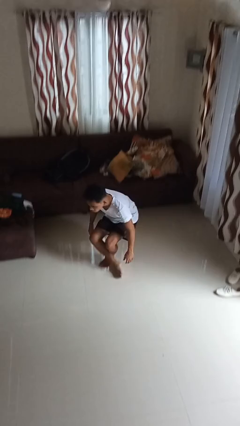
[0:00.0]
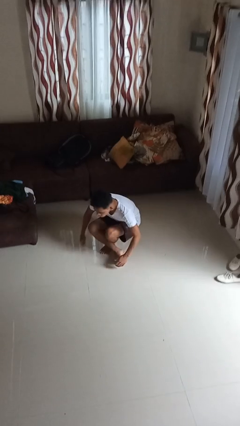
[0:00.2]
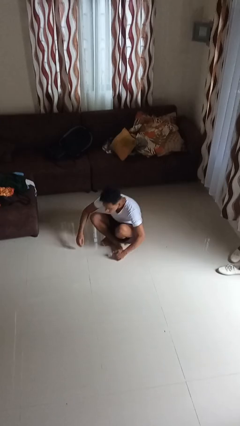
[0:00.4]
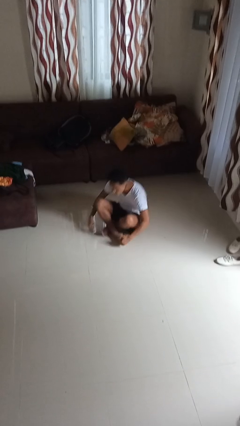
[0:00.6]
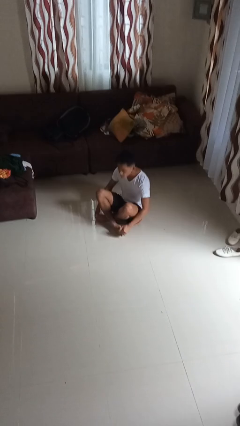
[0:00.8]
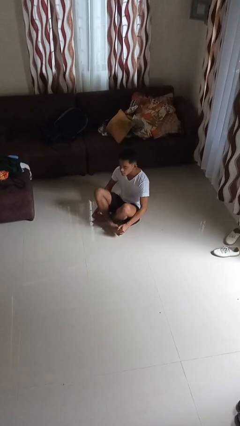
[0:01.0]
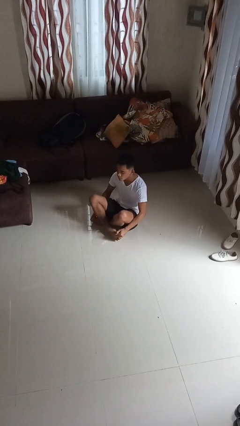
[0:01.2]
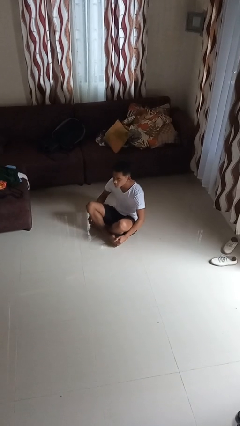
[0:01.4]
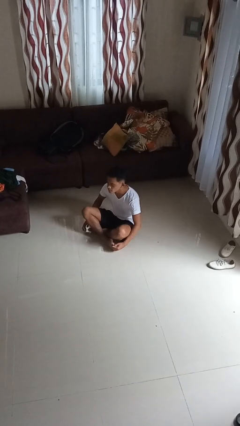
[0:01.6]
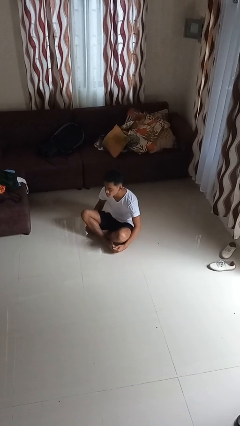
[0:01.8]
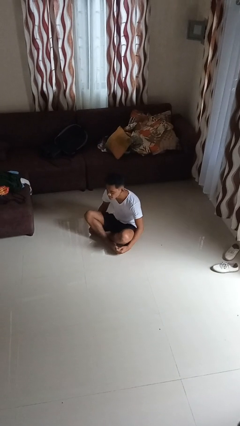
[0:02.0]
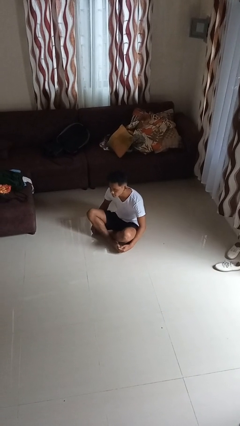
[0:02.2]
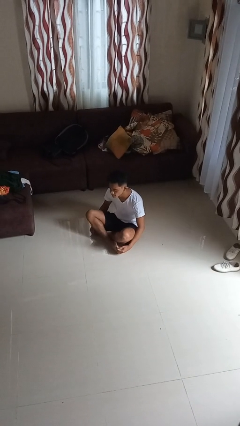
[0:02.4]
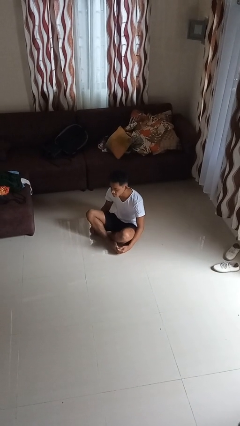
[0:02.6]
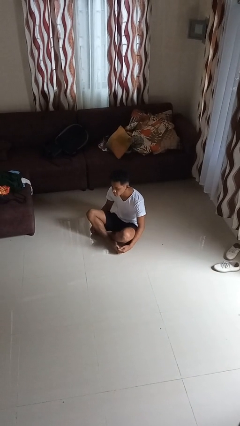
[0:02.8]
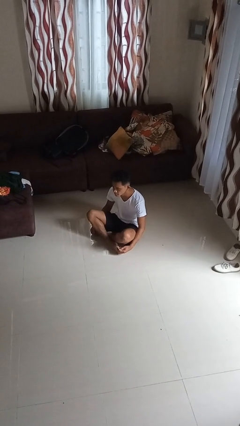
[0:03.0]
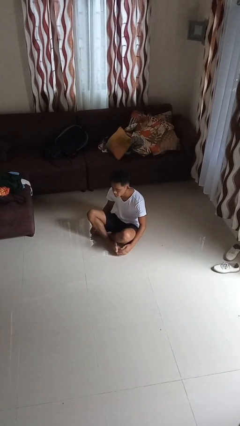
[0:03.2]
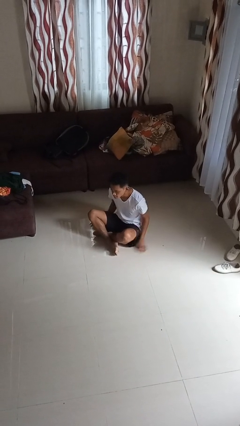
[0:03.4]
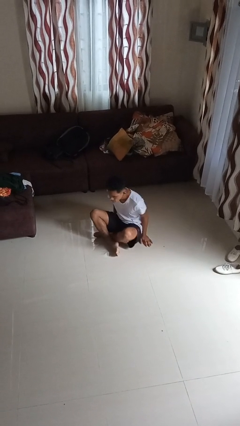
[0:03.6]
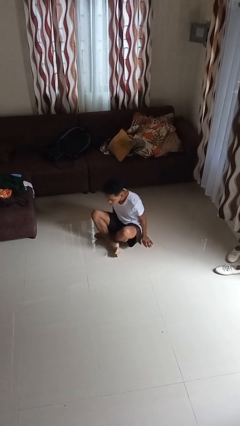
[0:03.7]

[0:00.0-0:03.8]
person sits crisscross

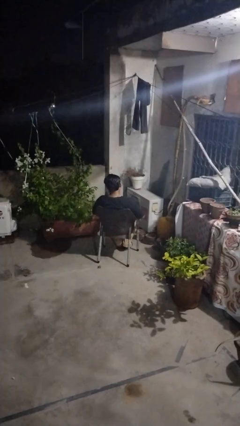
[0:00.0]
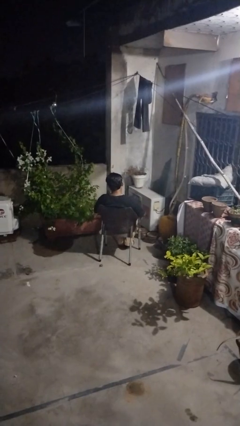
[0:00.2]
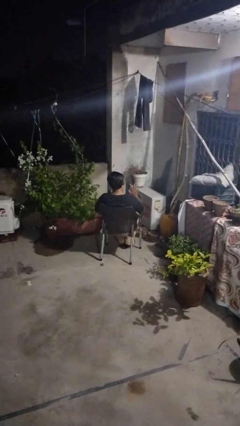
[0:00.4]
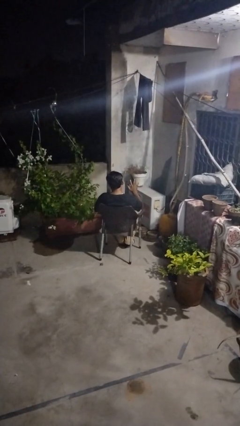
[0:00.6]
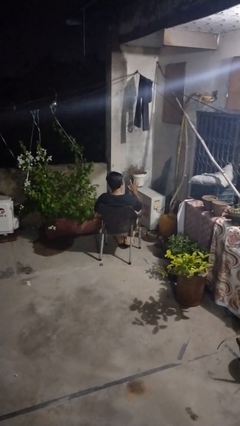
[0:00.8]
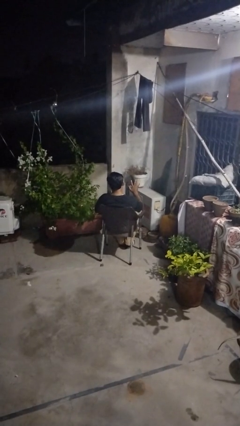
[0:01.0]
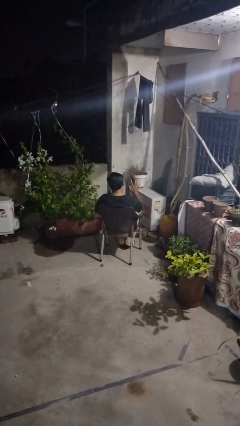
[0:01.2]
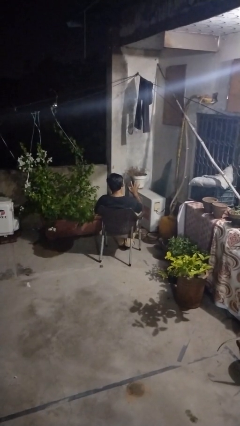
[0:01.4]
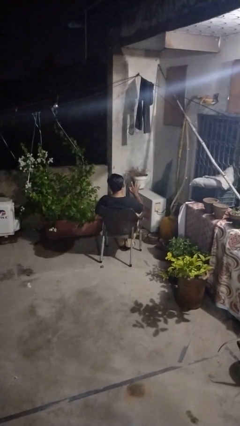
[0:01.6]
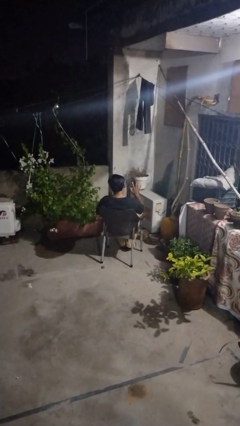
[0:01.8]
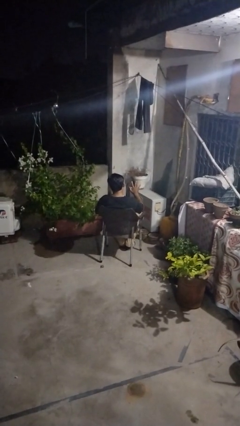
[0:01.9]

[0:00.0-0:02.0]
person gestures number five

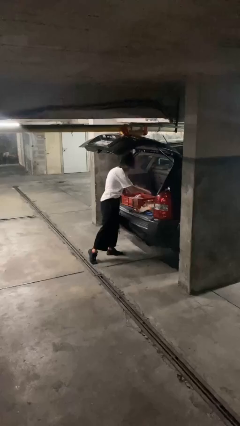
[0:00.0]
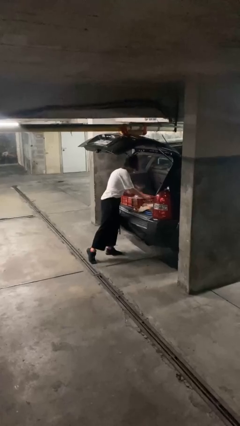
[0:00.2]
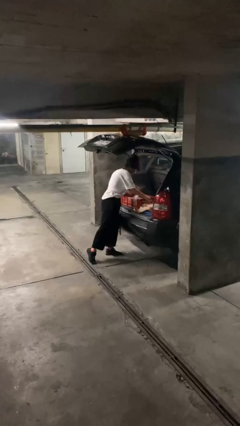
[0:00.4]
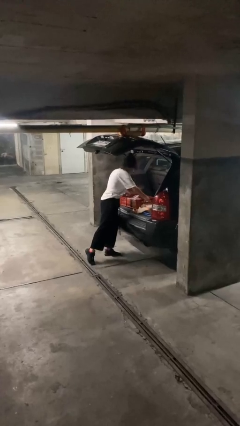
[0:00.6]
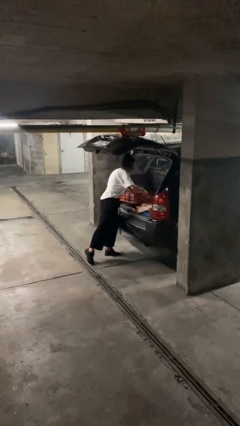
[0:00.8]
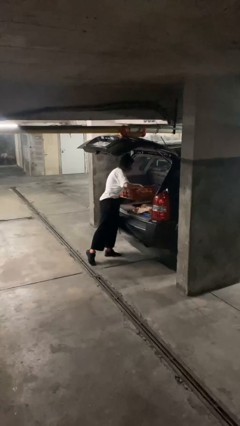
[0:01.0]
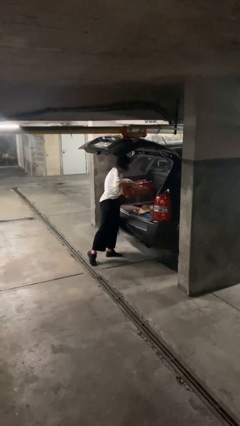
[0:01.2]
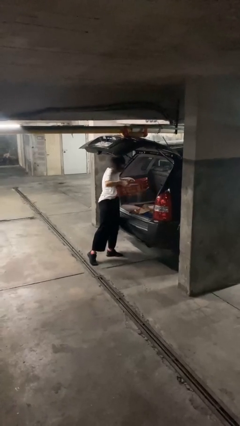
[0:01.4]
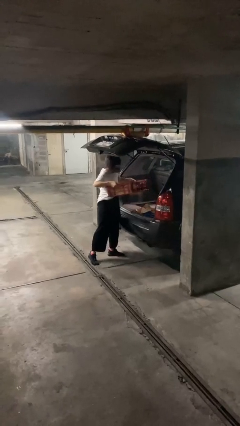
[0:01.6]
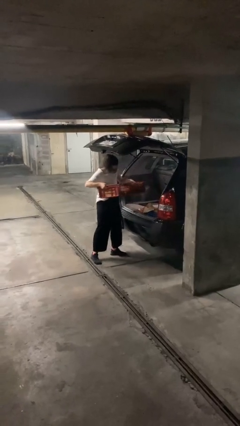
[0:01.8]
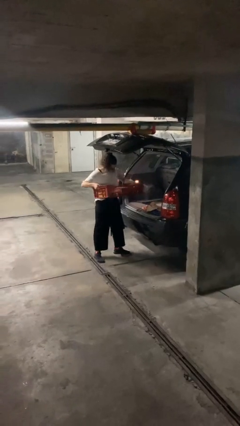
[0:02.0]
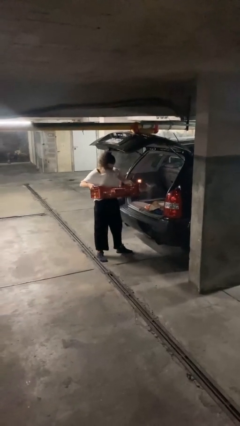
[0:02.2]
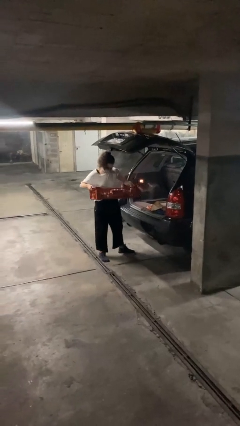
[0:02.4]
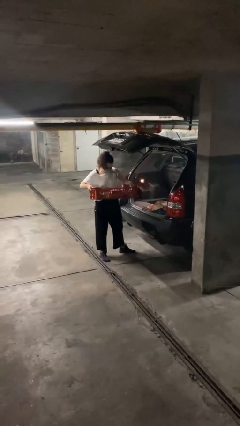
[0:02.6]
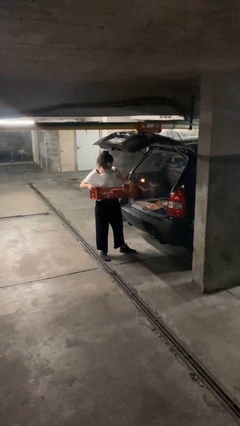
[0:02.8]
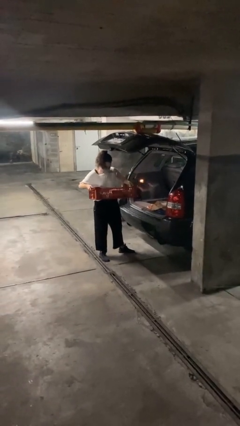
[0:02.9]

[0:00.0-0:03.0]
person unloads car

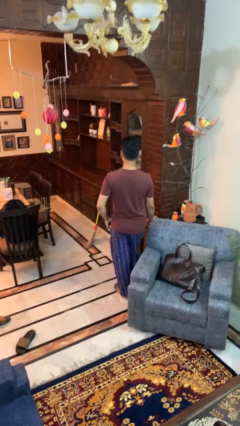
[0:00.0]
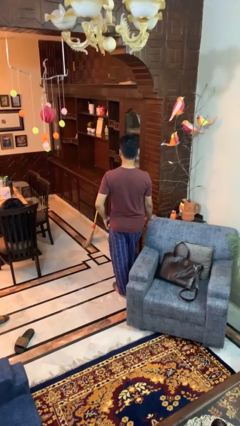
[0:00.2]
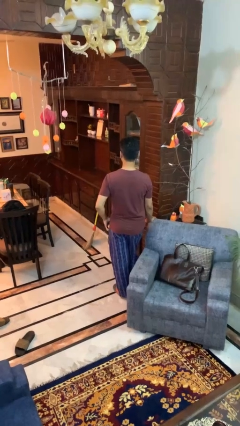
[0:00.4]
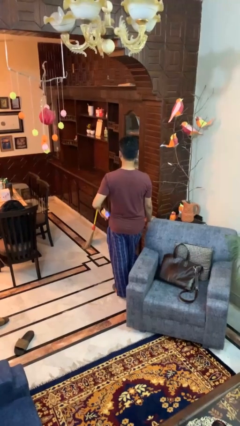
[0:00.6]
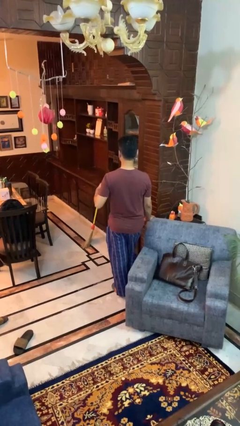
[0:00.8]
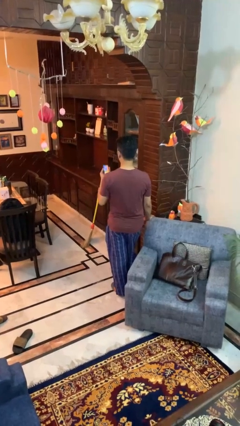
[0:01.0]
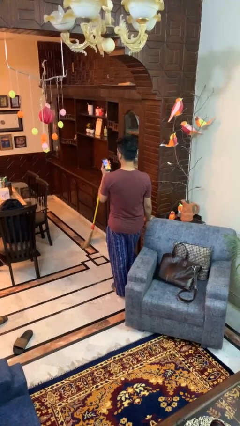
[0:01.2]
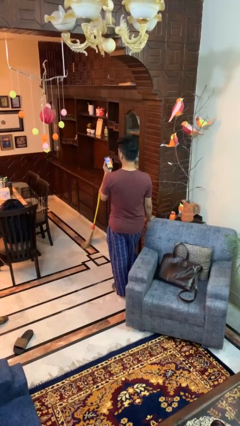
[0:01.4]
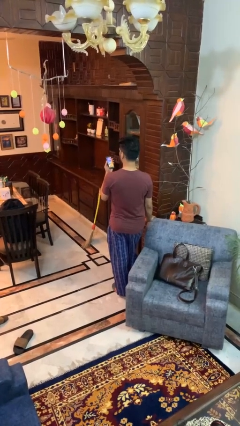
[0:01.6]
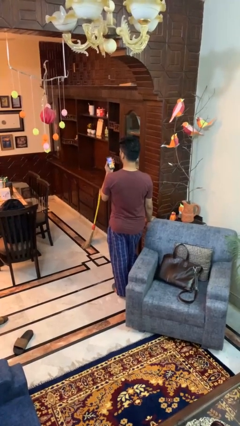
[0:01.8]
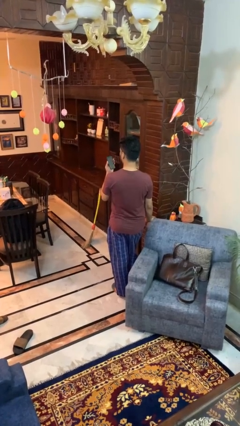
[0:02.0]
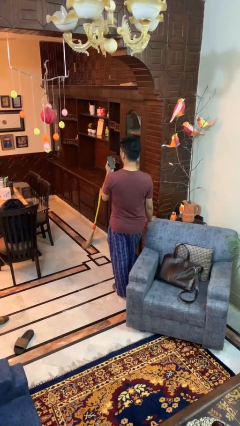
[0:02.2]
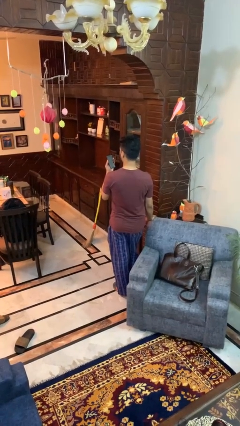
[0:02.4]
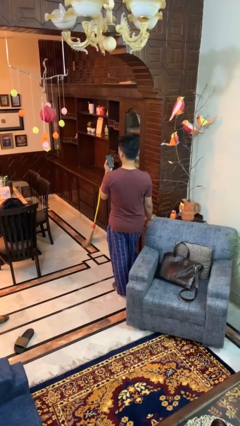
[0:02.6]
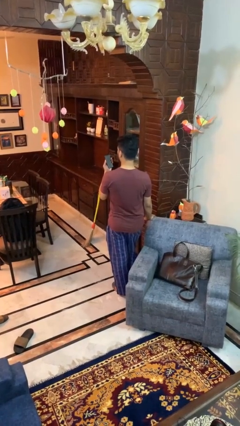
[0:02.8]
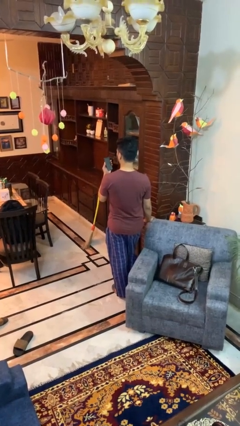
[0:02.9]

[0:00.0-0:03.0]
person takes phone from pocket

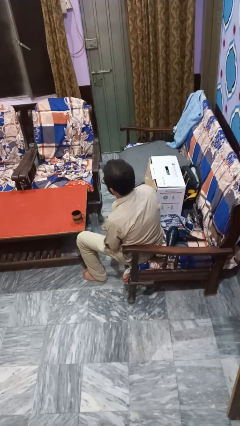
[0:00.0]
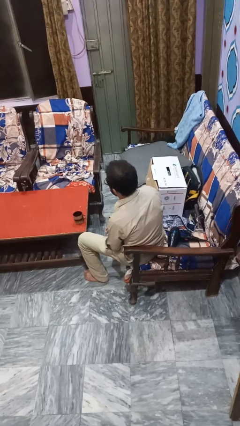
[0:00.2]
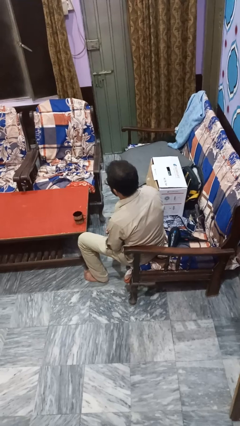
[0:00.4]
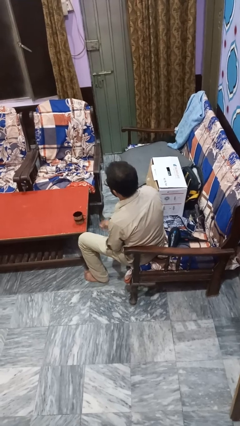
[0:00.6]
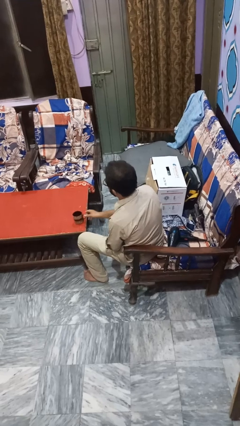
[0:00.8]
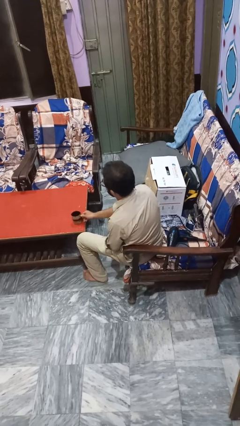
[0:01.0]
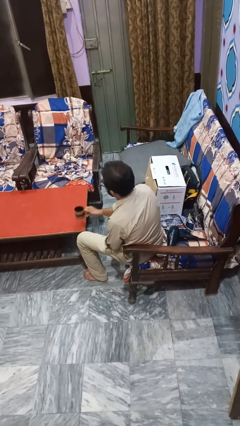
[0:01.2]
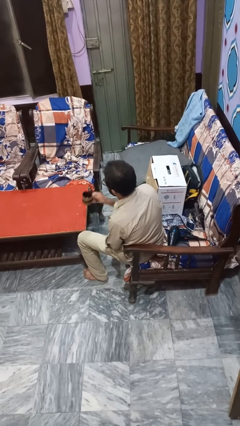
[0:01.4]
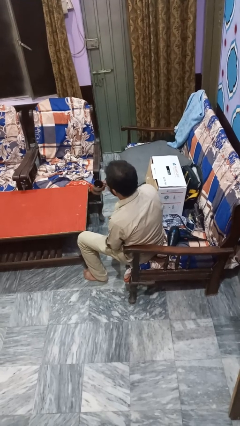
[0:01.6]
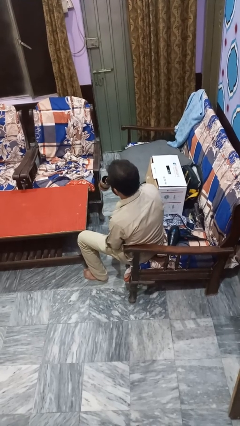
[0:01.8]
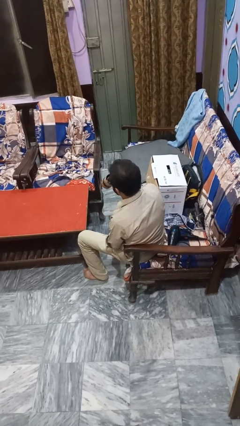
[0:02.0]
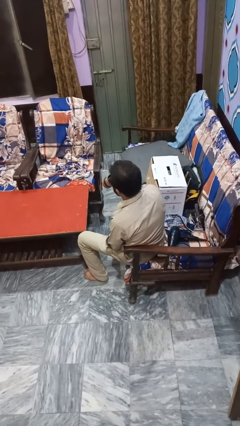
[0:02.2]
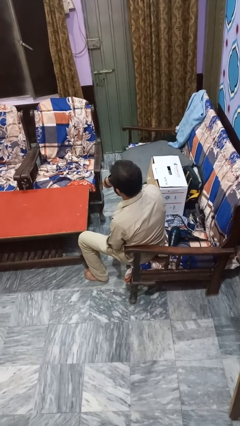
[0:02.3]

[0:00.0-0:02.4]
person pours coffee into mug

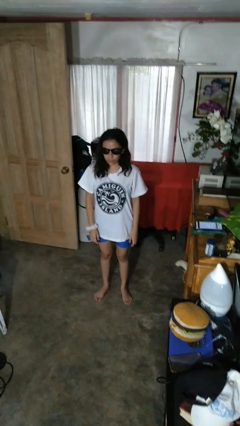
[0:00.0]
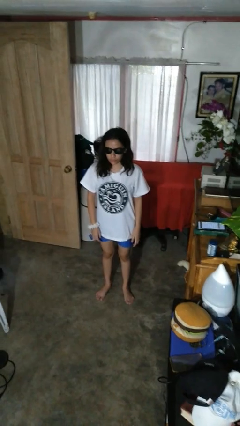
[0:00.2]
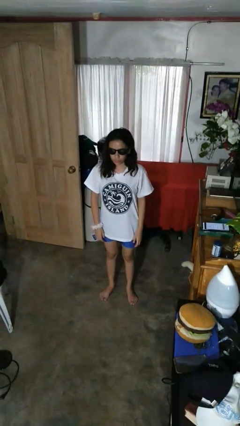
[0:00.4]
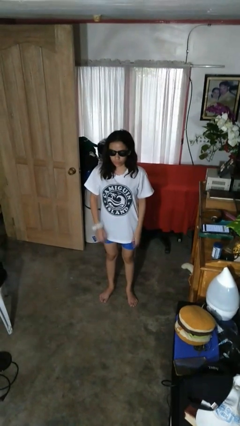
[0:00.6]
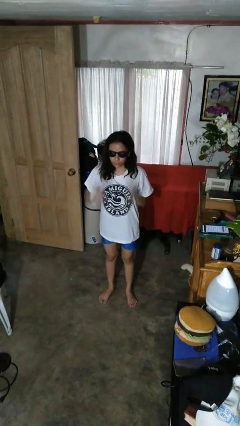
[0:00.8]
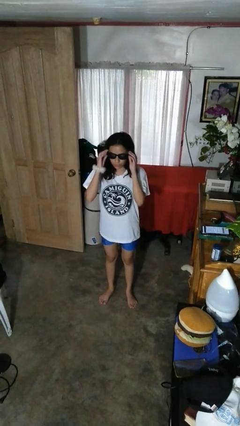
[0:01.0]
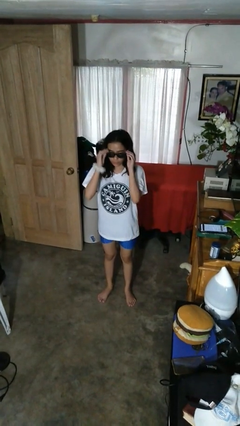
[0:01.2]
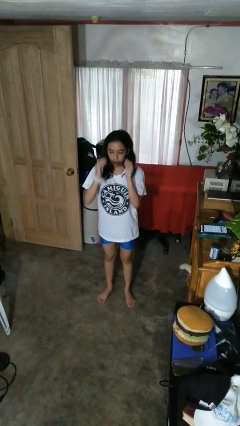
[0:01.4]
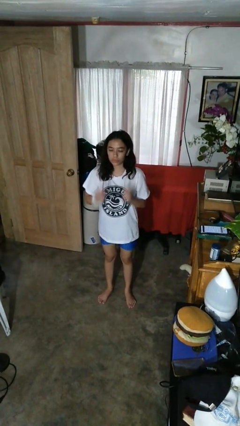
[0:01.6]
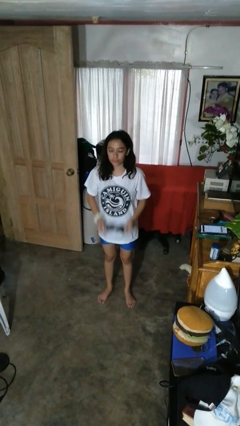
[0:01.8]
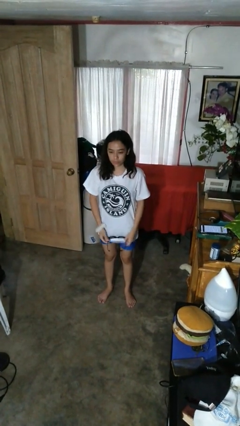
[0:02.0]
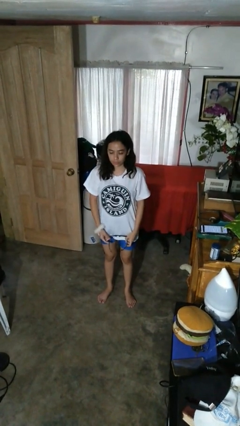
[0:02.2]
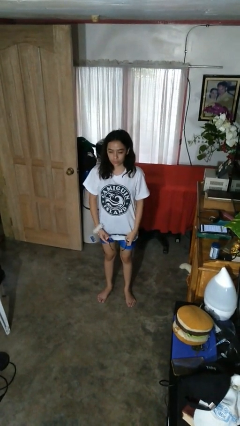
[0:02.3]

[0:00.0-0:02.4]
person takes off sunglasses

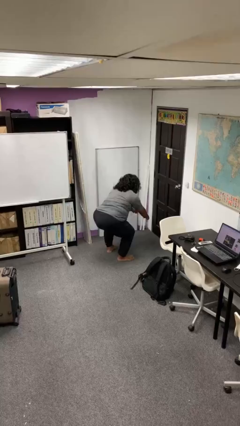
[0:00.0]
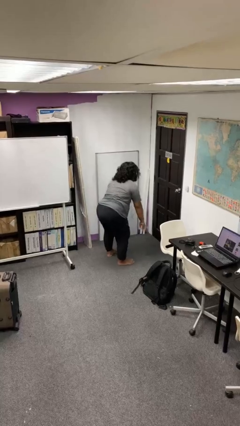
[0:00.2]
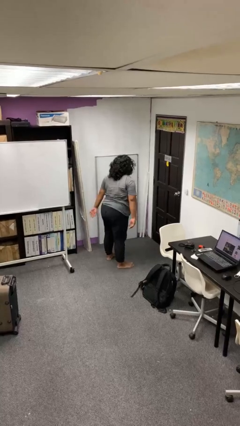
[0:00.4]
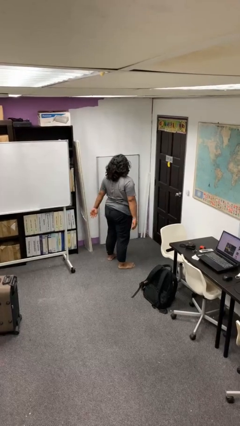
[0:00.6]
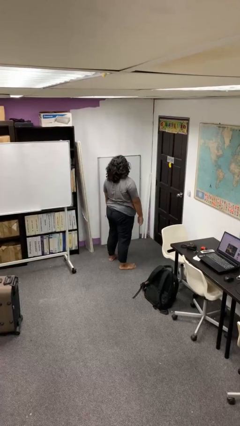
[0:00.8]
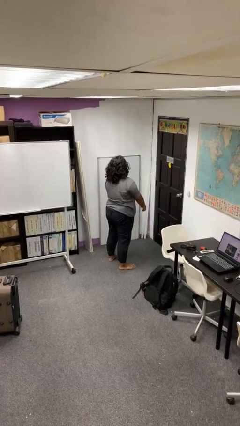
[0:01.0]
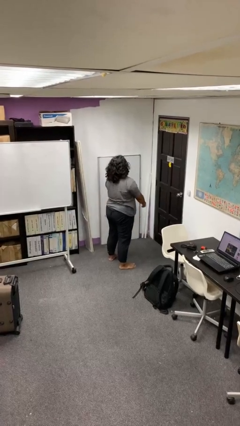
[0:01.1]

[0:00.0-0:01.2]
person stands up
